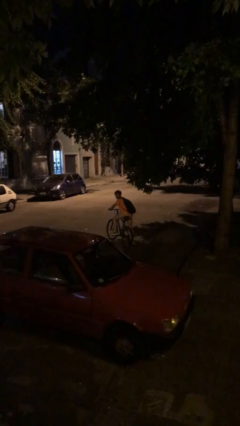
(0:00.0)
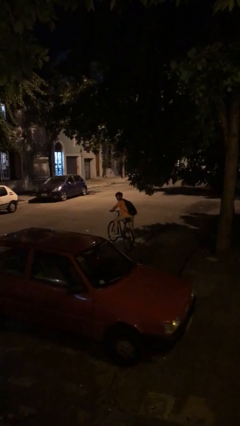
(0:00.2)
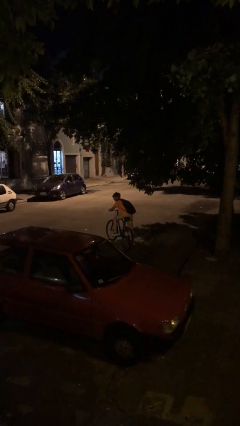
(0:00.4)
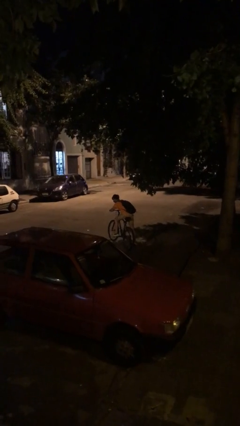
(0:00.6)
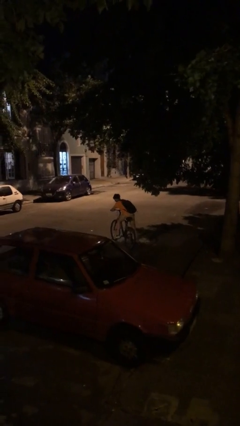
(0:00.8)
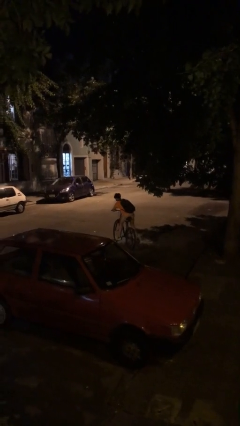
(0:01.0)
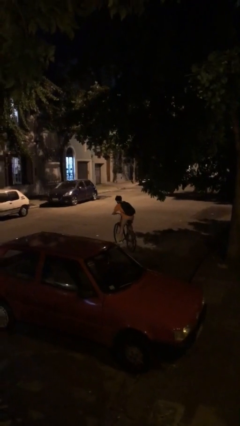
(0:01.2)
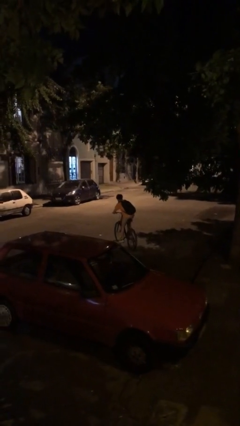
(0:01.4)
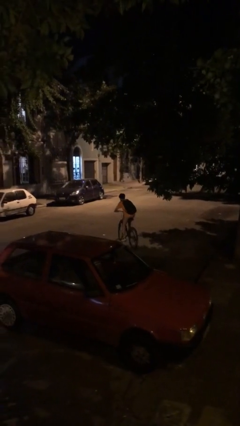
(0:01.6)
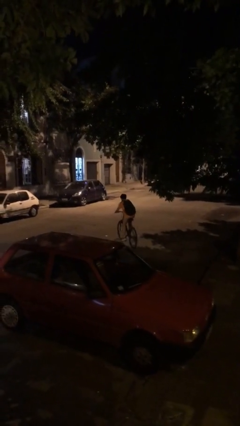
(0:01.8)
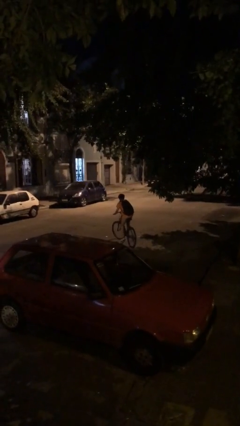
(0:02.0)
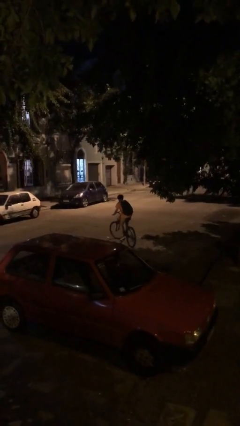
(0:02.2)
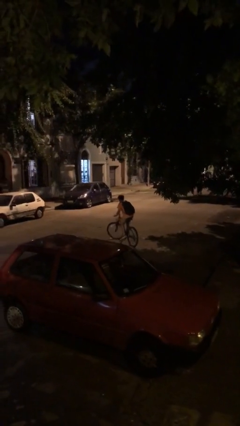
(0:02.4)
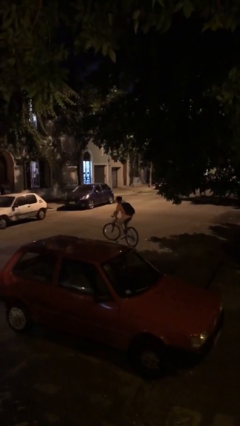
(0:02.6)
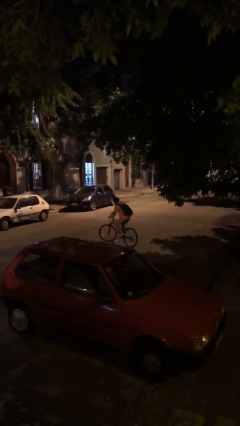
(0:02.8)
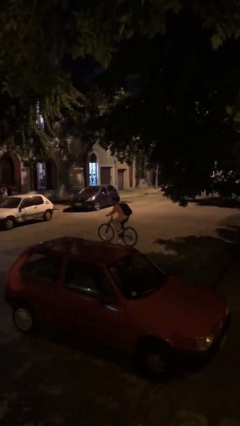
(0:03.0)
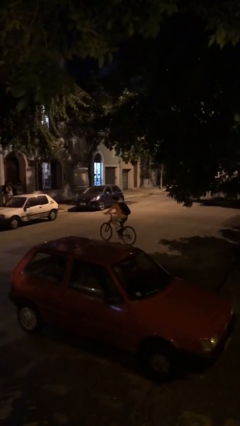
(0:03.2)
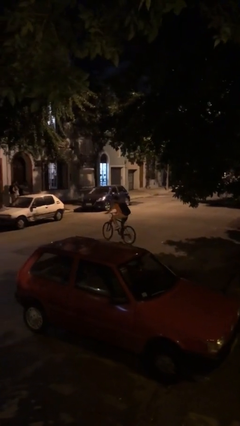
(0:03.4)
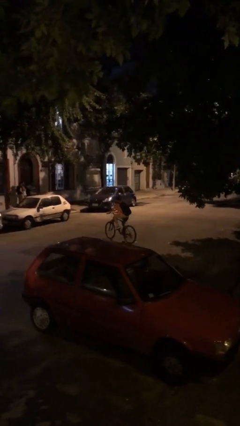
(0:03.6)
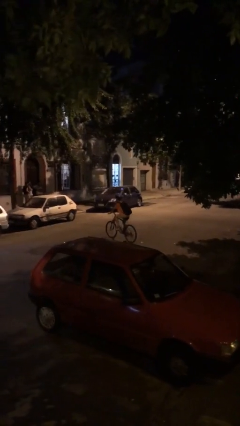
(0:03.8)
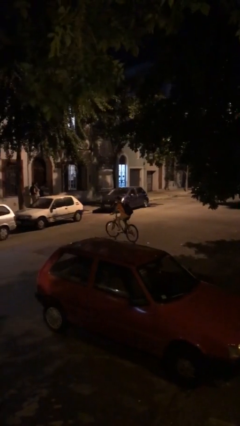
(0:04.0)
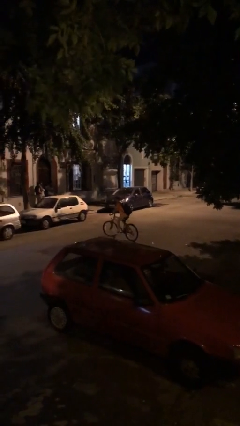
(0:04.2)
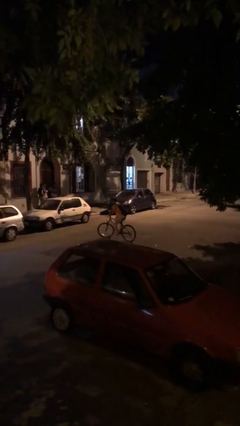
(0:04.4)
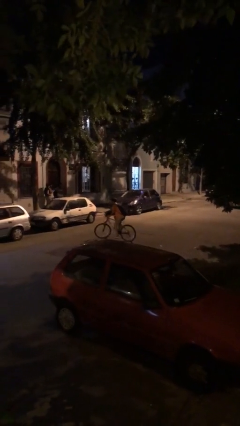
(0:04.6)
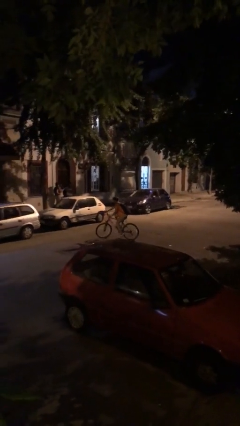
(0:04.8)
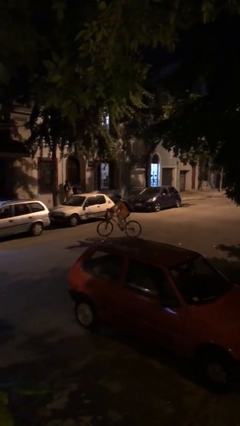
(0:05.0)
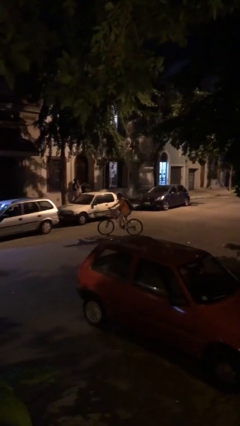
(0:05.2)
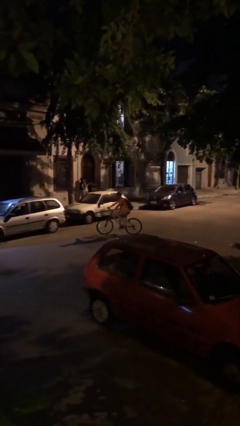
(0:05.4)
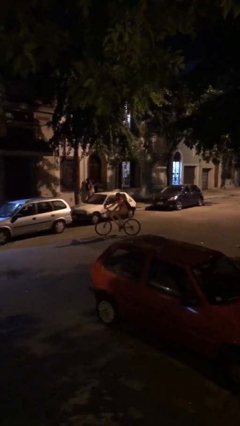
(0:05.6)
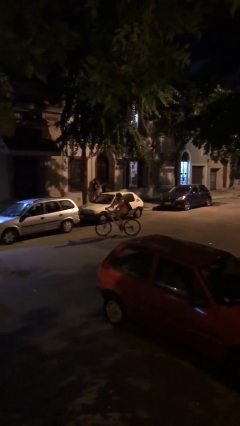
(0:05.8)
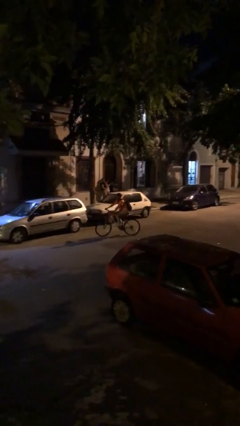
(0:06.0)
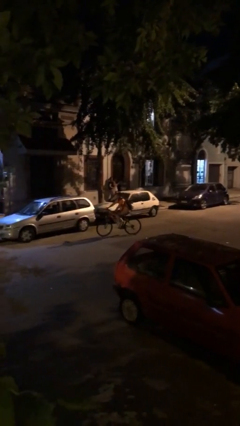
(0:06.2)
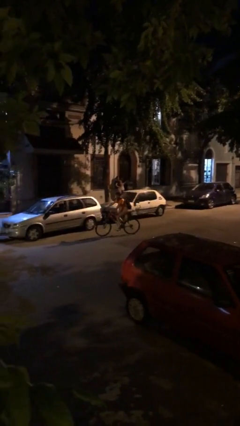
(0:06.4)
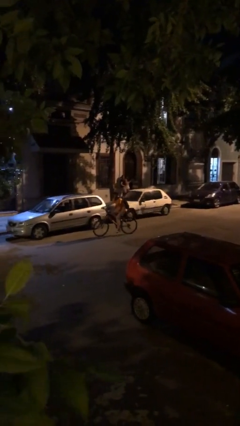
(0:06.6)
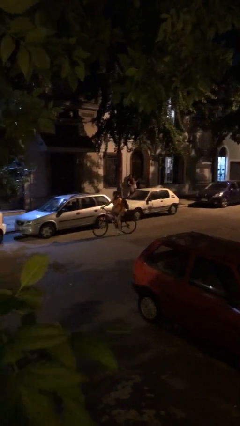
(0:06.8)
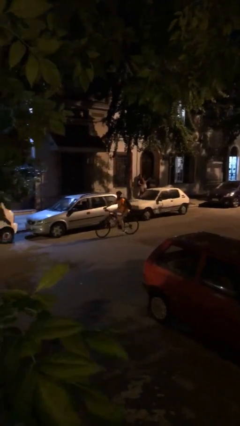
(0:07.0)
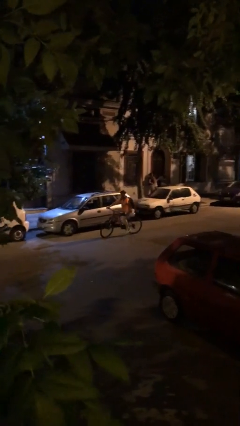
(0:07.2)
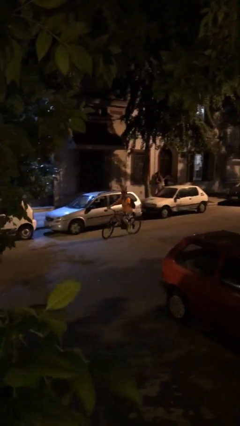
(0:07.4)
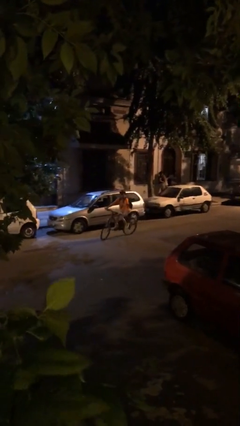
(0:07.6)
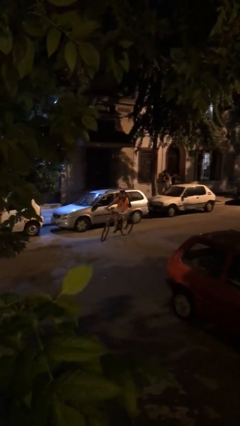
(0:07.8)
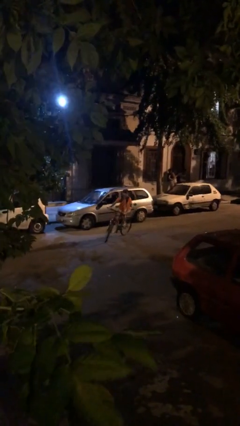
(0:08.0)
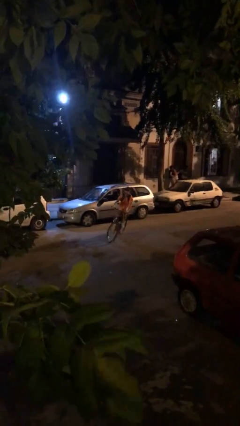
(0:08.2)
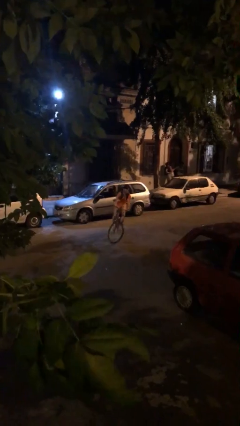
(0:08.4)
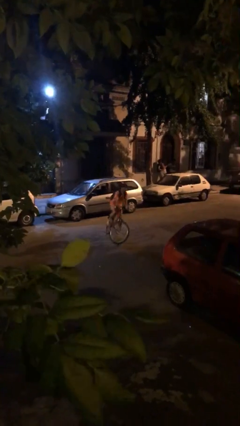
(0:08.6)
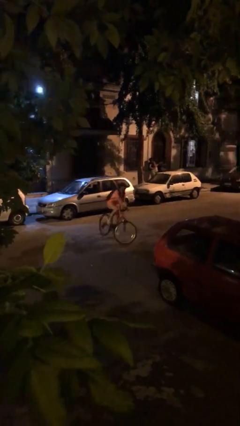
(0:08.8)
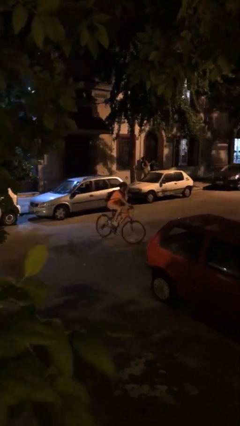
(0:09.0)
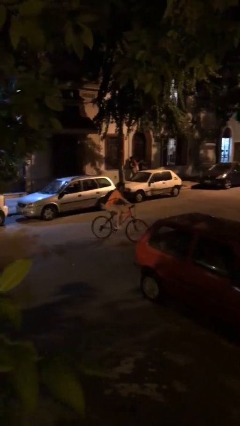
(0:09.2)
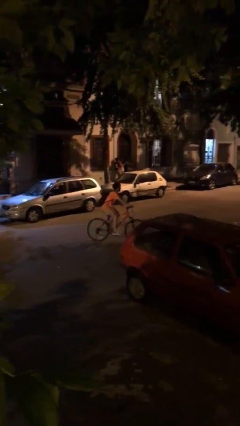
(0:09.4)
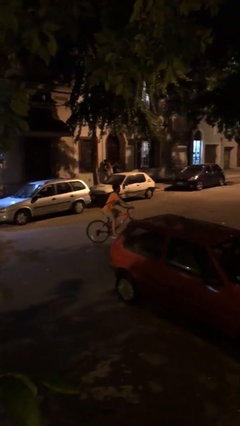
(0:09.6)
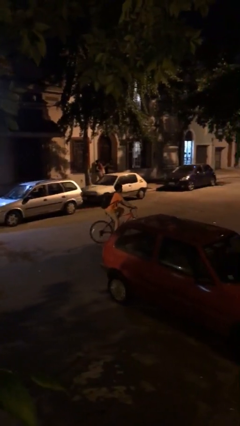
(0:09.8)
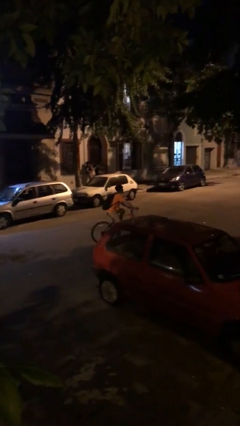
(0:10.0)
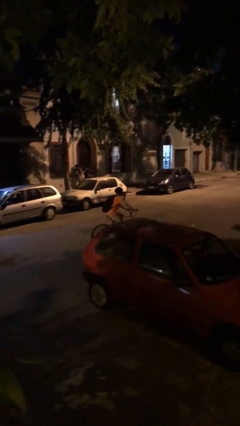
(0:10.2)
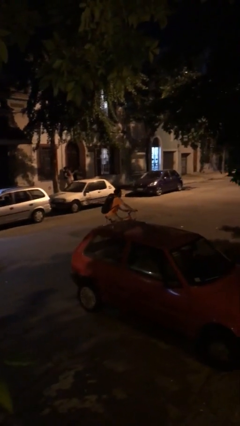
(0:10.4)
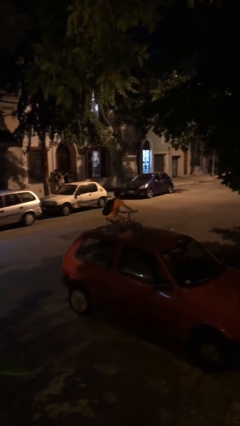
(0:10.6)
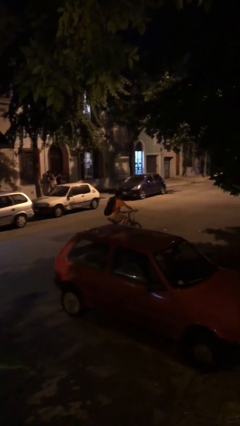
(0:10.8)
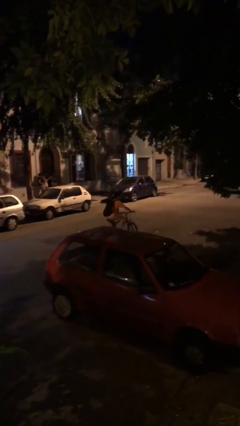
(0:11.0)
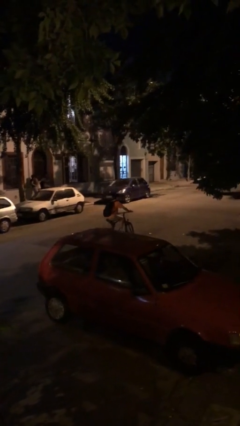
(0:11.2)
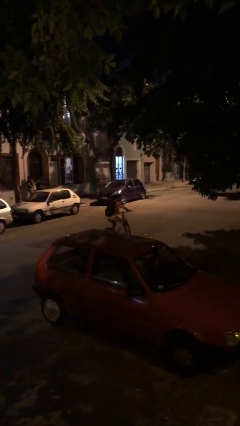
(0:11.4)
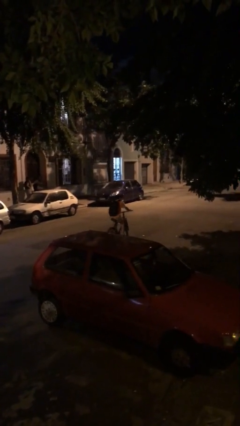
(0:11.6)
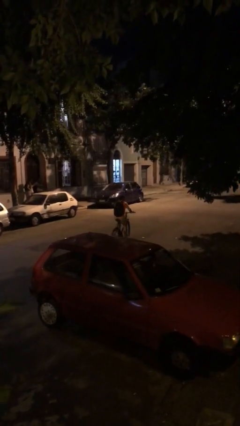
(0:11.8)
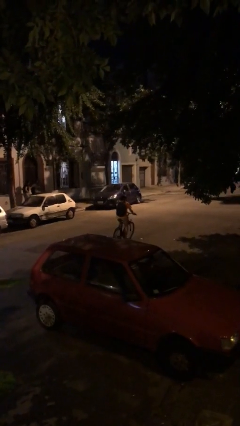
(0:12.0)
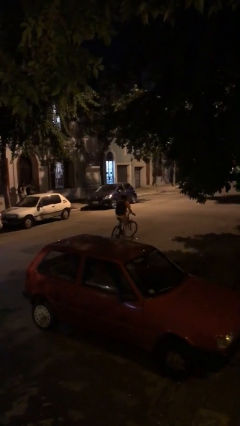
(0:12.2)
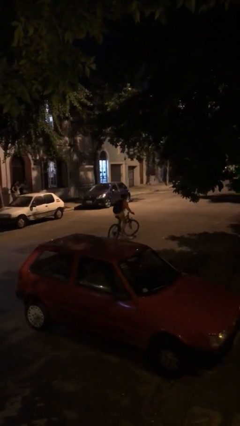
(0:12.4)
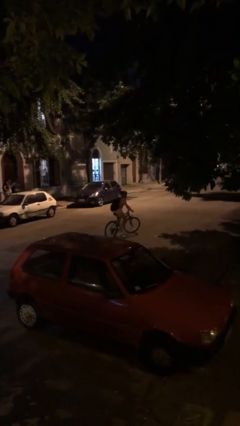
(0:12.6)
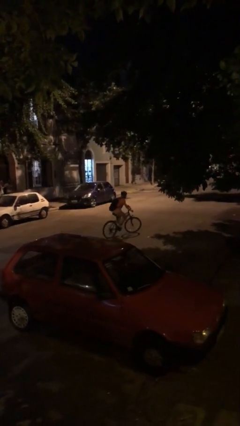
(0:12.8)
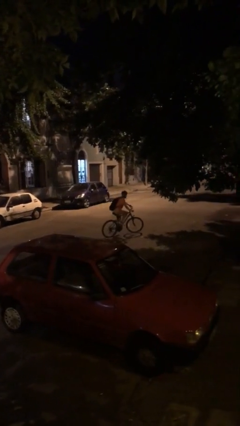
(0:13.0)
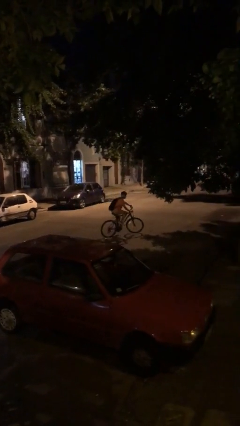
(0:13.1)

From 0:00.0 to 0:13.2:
person rides bicycle

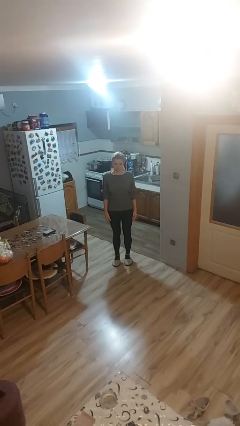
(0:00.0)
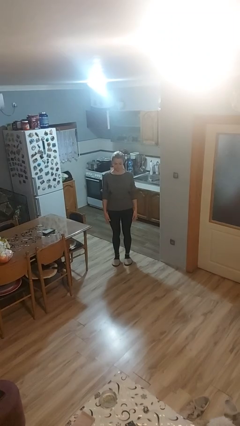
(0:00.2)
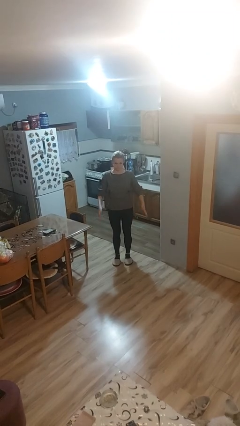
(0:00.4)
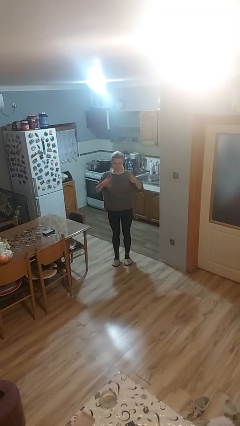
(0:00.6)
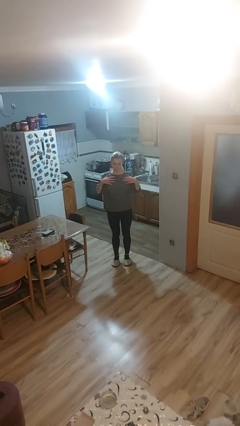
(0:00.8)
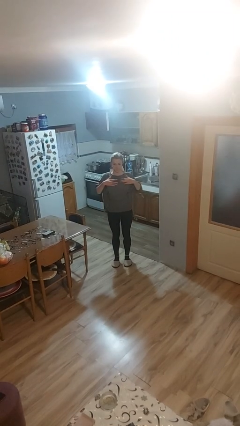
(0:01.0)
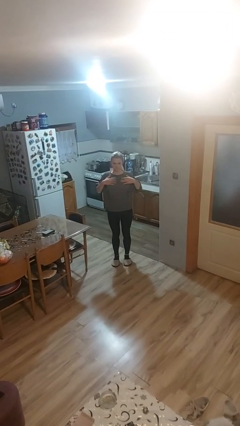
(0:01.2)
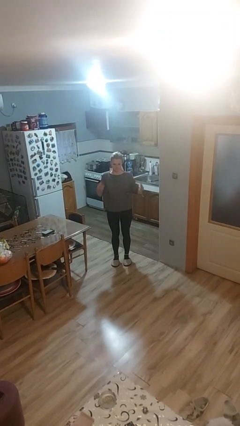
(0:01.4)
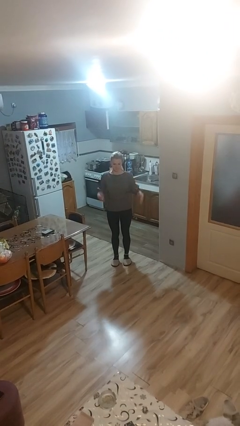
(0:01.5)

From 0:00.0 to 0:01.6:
person drums on chest

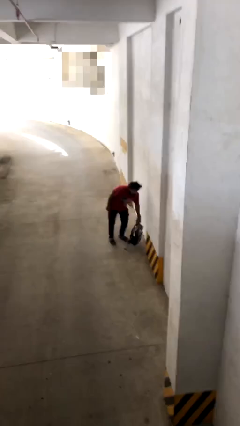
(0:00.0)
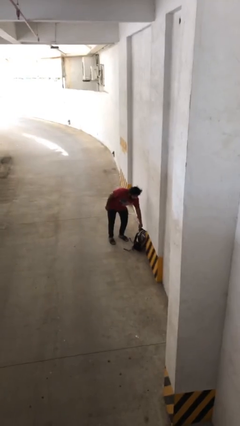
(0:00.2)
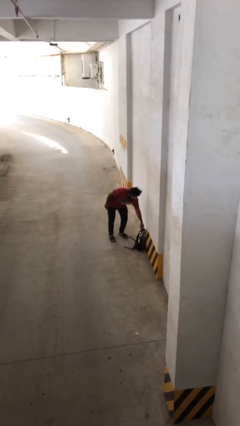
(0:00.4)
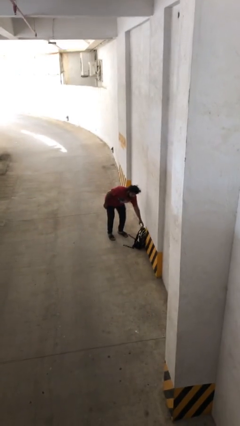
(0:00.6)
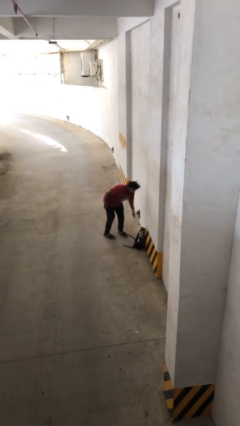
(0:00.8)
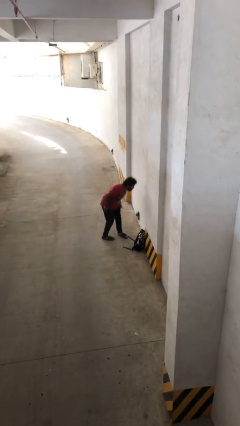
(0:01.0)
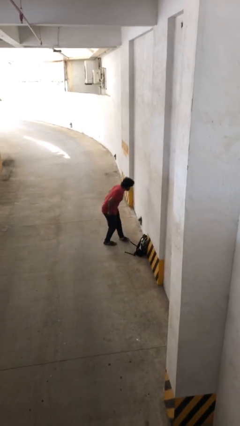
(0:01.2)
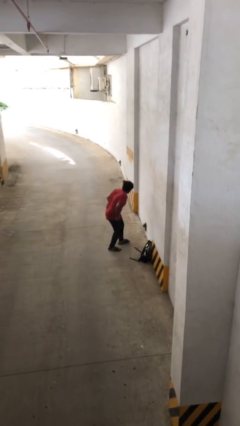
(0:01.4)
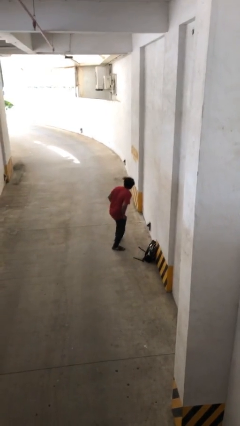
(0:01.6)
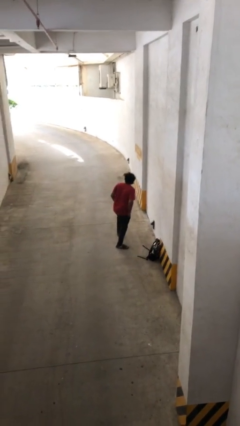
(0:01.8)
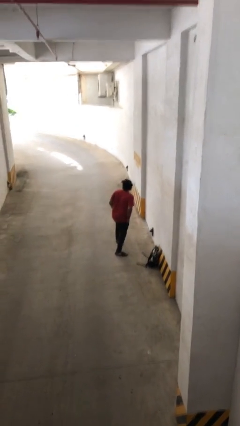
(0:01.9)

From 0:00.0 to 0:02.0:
person puts down object on floor

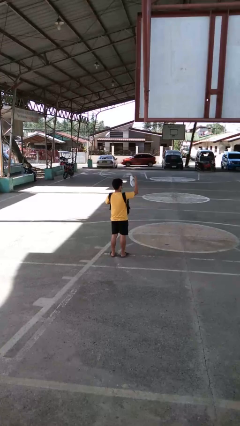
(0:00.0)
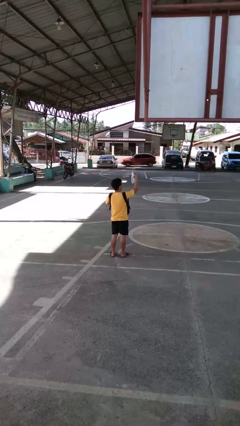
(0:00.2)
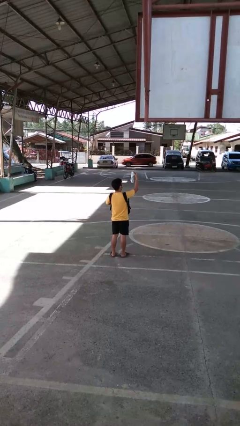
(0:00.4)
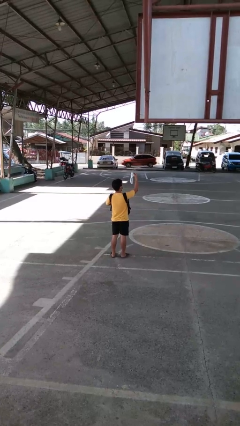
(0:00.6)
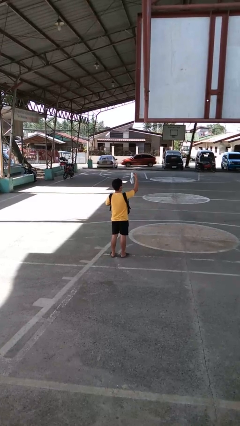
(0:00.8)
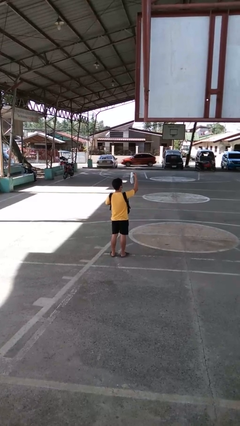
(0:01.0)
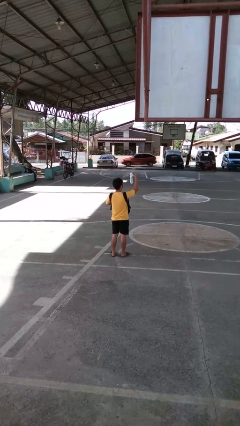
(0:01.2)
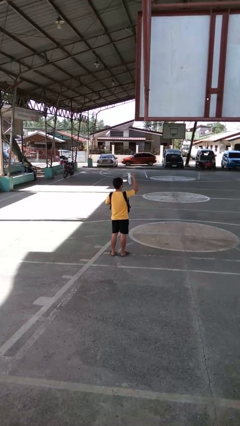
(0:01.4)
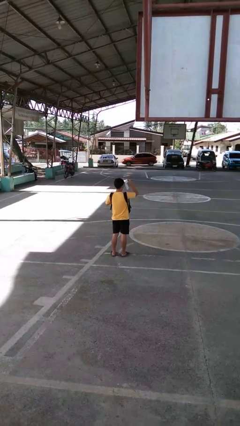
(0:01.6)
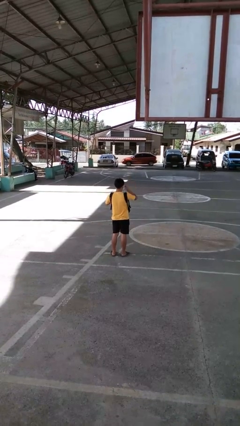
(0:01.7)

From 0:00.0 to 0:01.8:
person takes object from backpack
